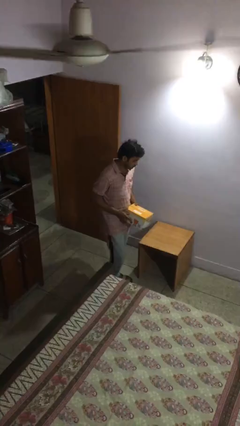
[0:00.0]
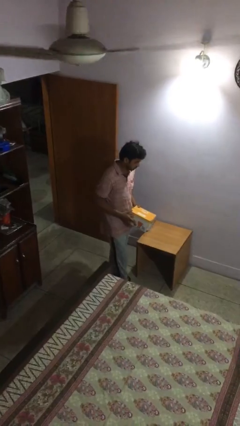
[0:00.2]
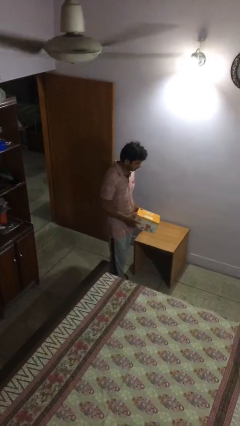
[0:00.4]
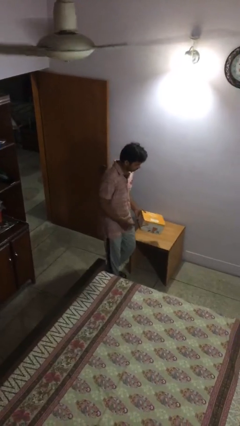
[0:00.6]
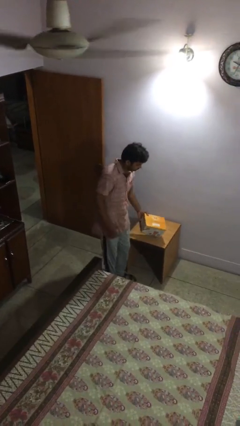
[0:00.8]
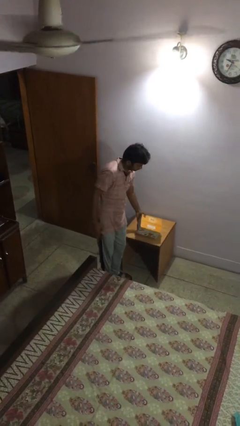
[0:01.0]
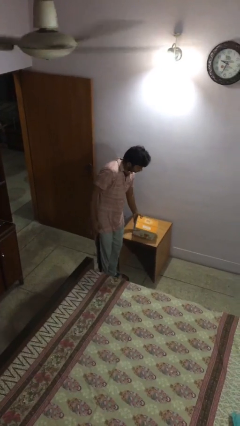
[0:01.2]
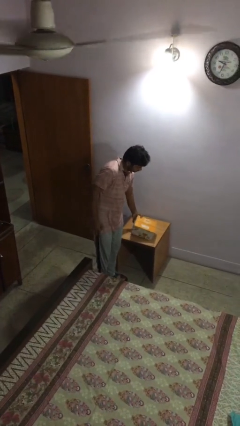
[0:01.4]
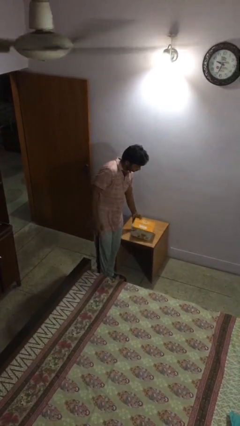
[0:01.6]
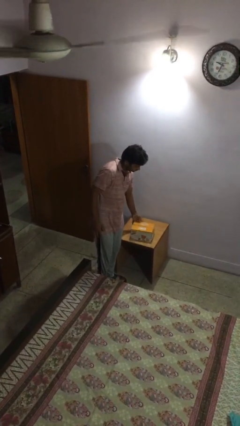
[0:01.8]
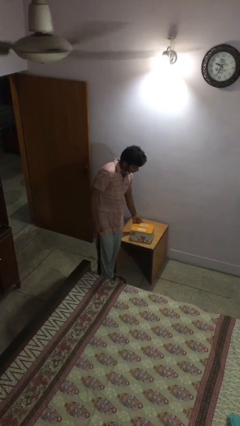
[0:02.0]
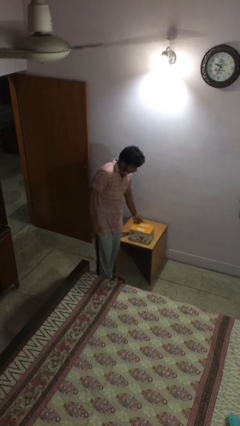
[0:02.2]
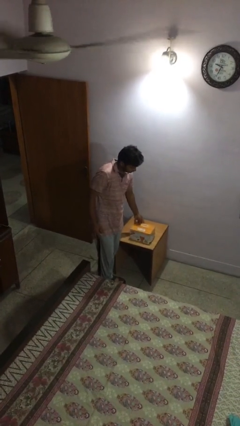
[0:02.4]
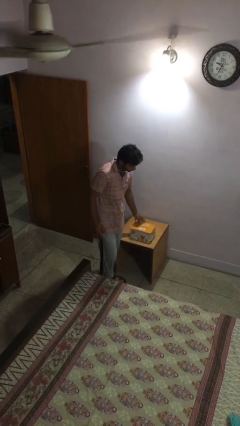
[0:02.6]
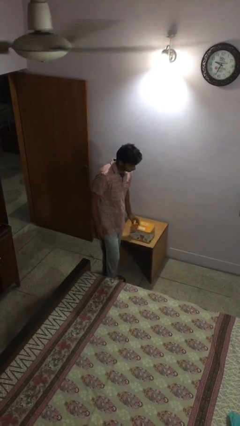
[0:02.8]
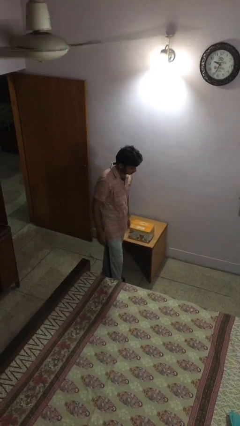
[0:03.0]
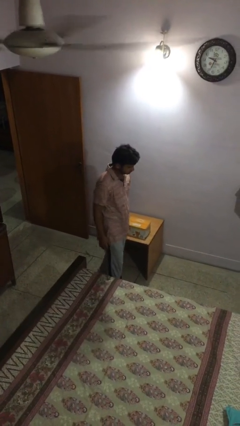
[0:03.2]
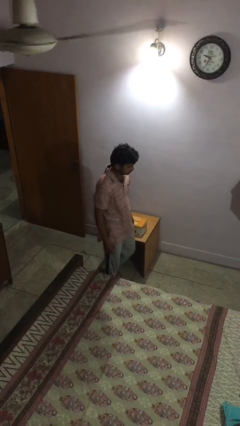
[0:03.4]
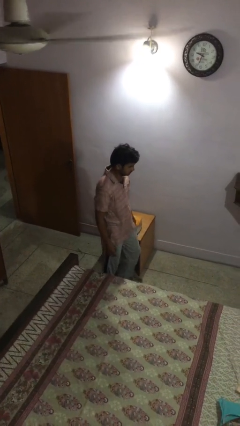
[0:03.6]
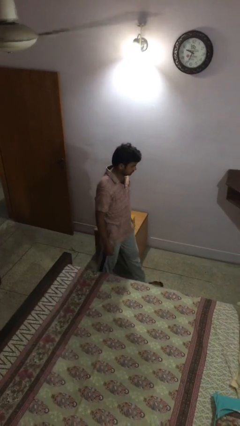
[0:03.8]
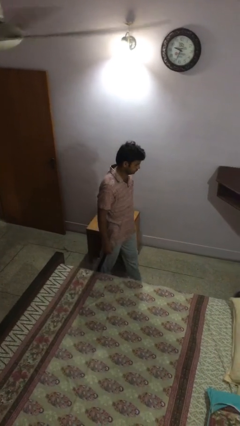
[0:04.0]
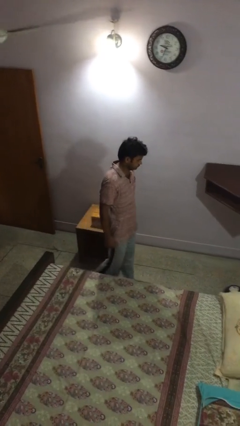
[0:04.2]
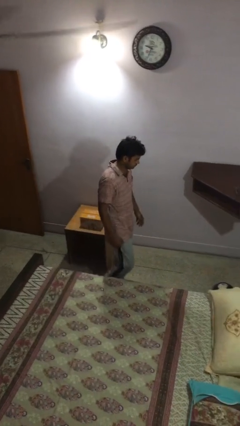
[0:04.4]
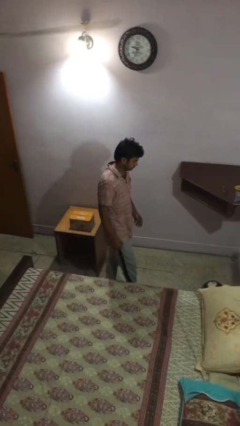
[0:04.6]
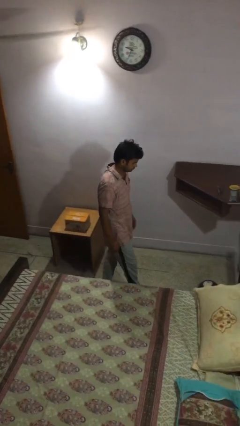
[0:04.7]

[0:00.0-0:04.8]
person puts down object on table

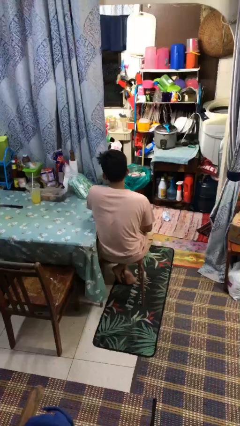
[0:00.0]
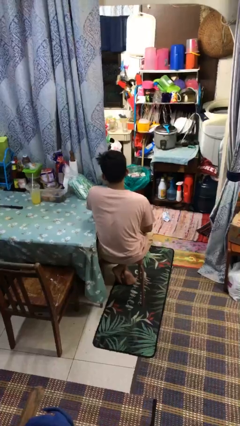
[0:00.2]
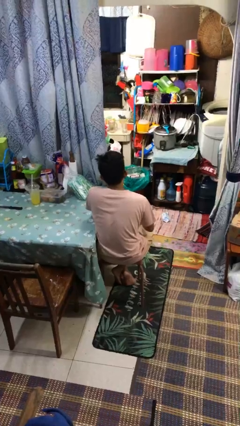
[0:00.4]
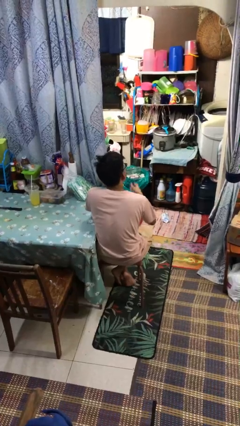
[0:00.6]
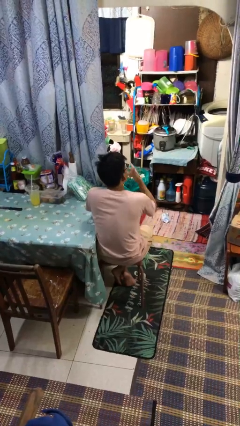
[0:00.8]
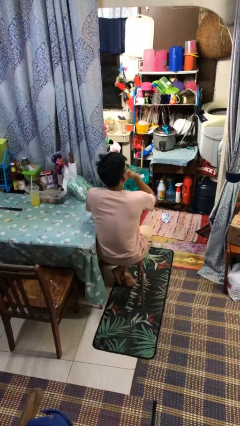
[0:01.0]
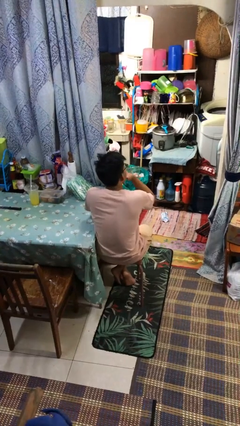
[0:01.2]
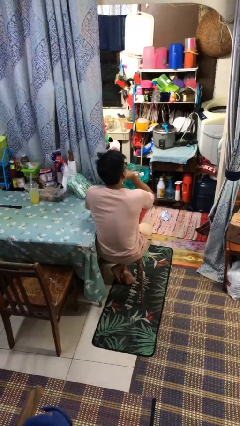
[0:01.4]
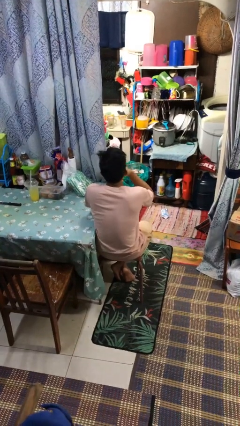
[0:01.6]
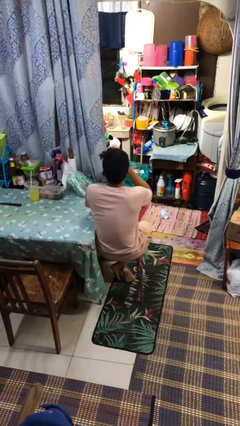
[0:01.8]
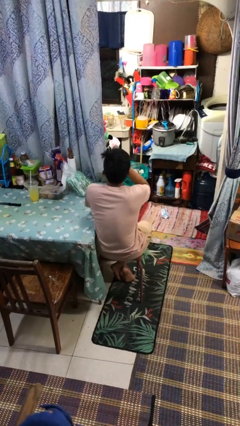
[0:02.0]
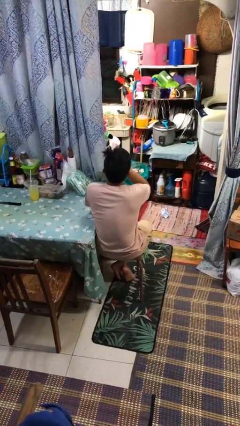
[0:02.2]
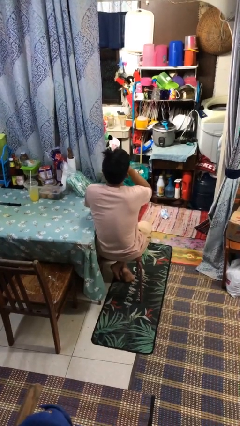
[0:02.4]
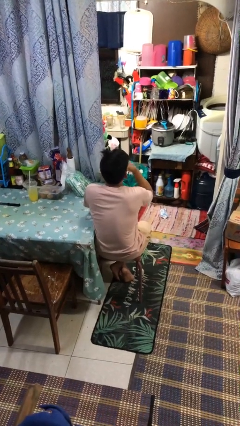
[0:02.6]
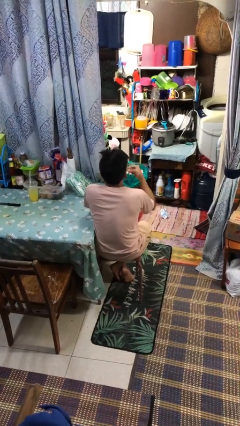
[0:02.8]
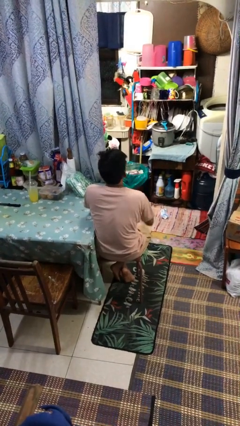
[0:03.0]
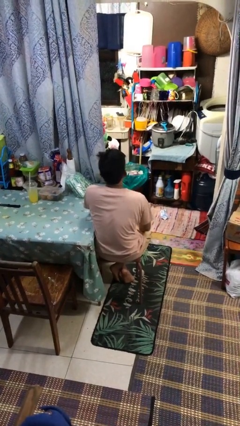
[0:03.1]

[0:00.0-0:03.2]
person strokes chin

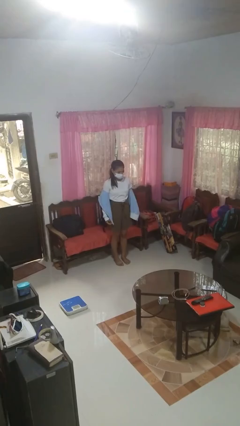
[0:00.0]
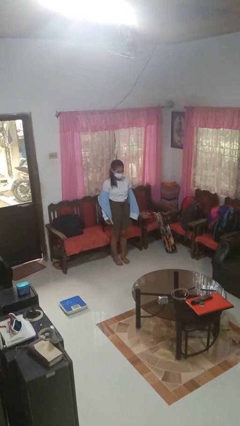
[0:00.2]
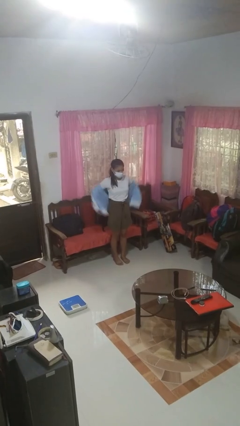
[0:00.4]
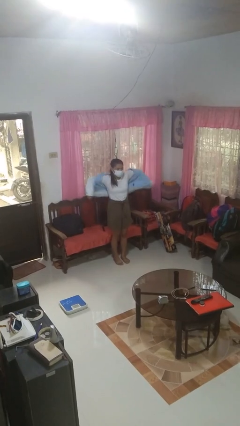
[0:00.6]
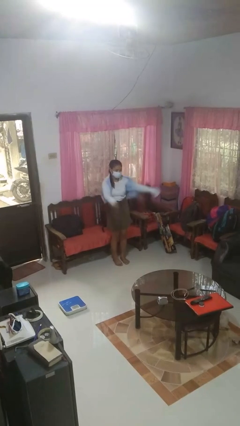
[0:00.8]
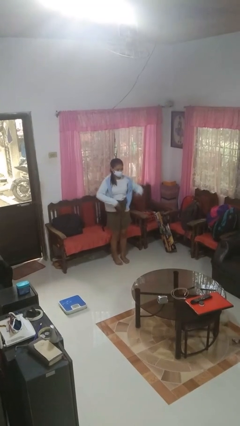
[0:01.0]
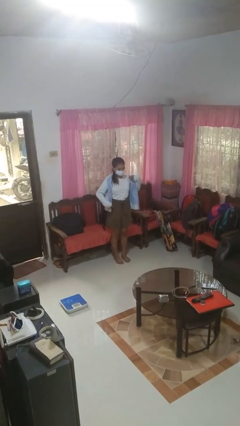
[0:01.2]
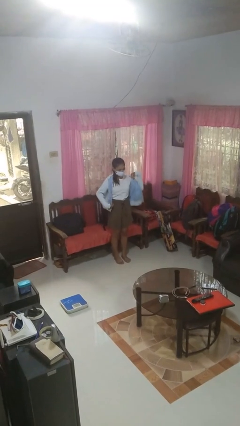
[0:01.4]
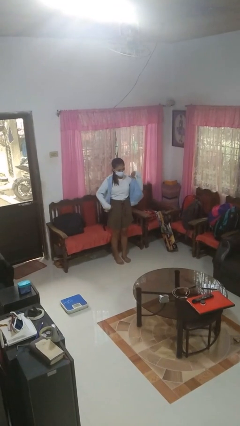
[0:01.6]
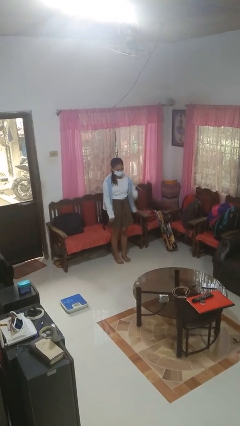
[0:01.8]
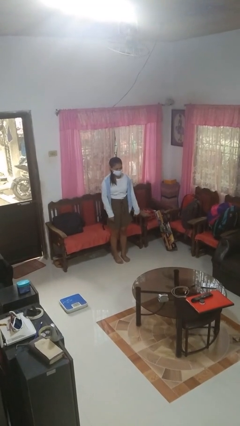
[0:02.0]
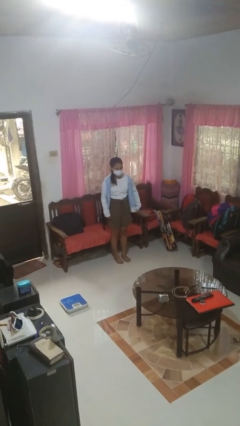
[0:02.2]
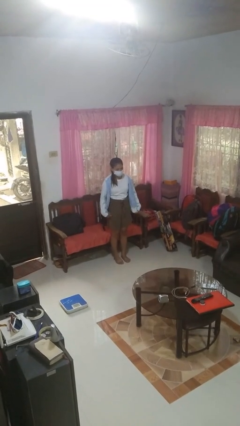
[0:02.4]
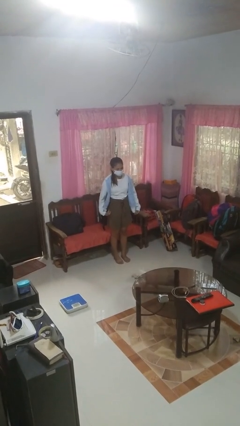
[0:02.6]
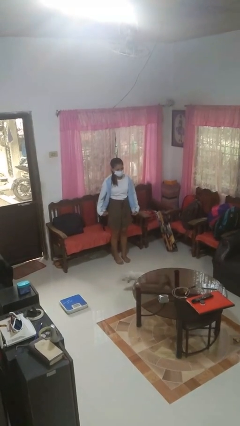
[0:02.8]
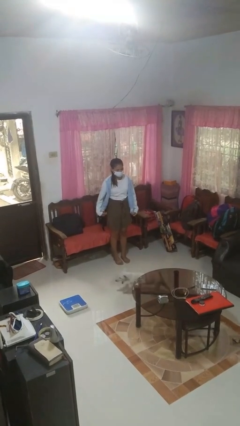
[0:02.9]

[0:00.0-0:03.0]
person puts on jacket

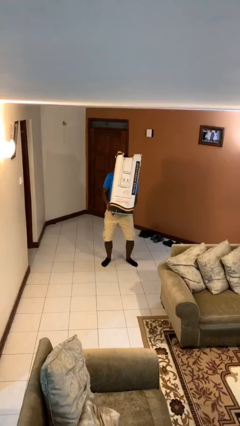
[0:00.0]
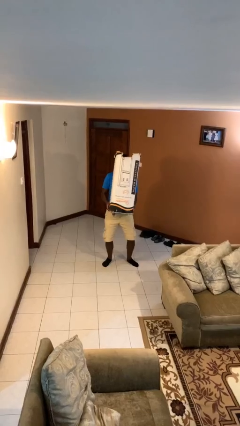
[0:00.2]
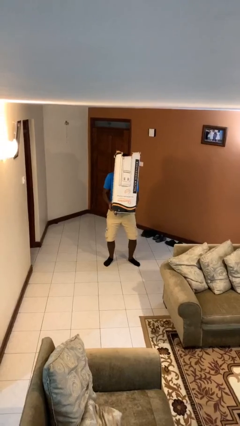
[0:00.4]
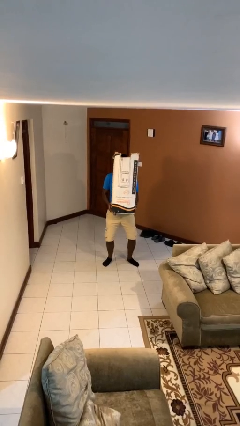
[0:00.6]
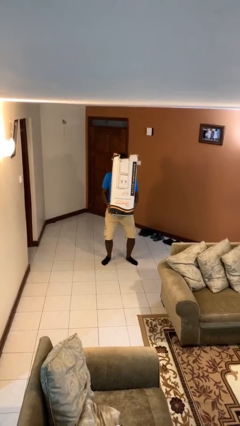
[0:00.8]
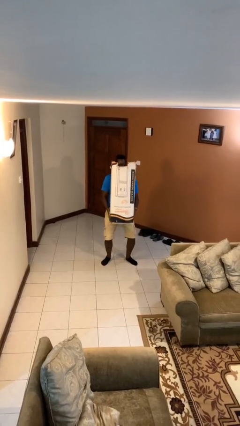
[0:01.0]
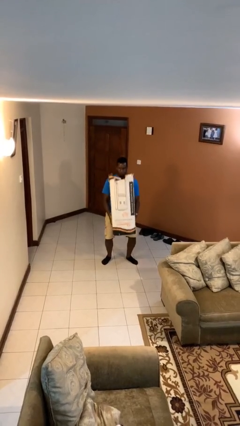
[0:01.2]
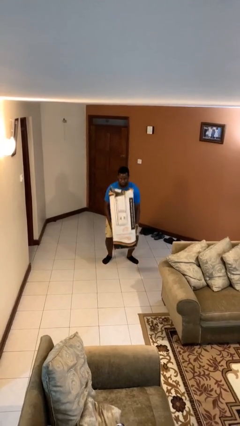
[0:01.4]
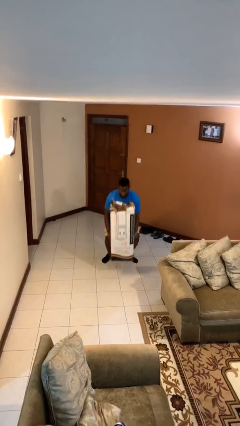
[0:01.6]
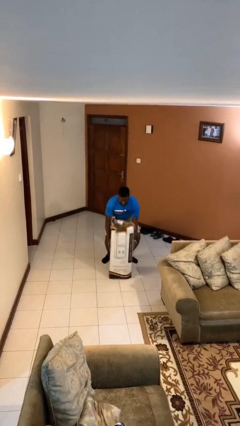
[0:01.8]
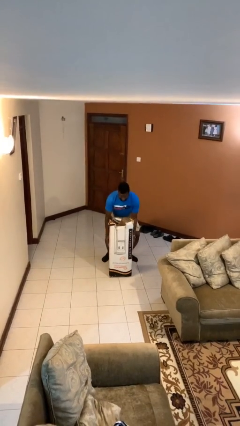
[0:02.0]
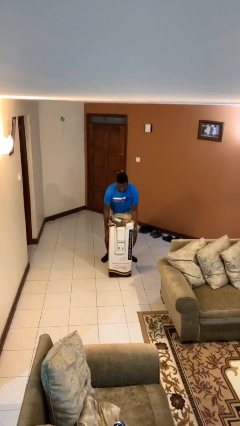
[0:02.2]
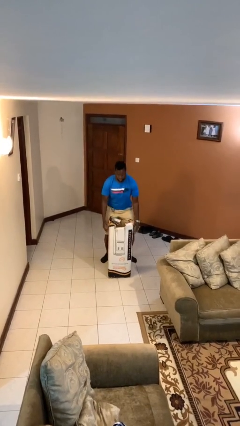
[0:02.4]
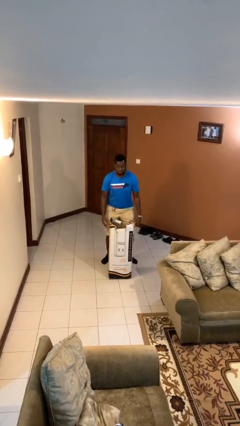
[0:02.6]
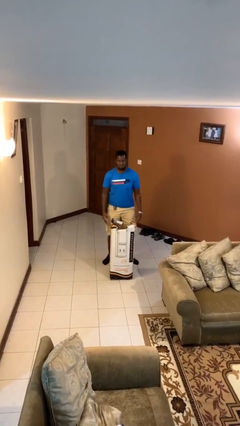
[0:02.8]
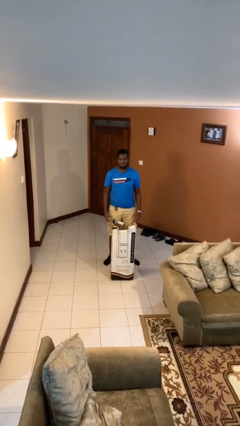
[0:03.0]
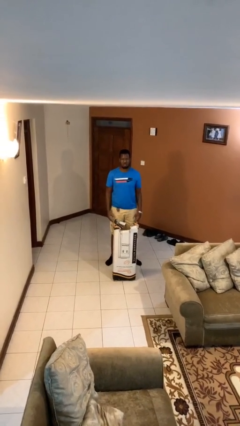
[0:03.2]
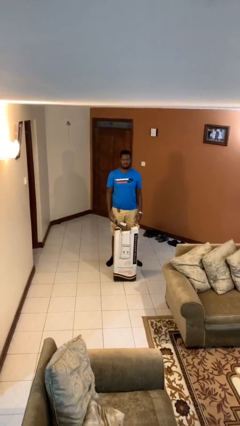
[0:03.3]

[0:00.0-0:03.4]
person puts down object on floor

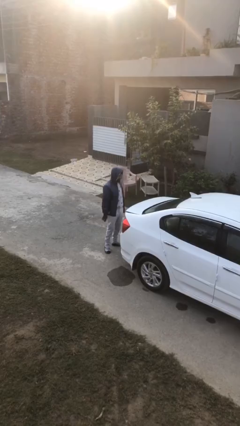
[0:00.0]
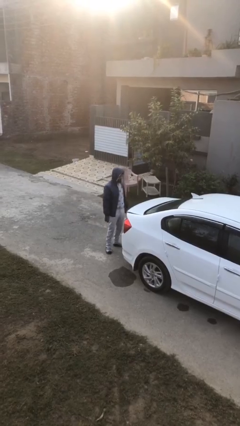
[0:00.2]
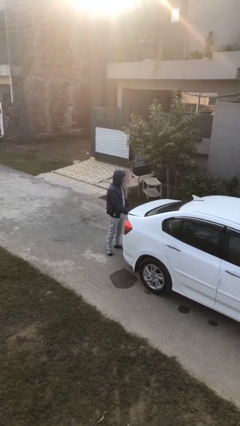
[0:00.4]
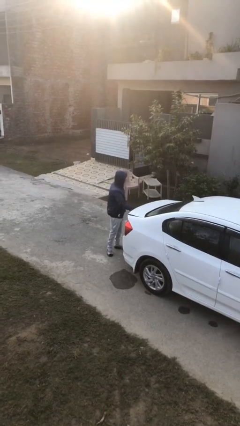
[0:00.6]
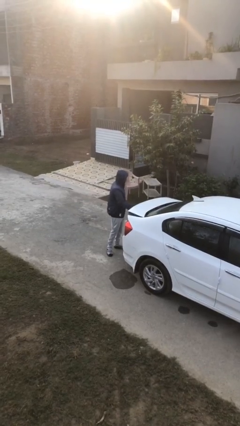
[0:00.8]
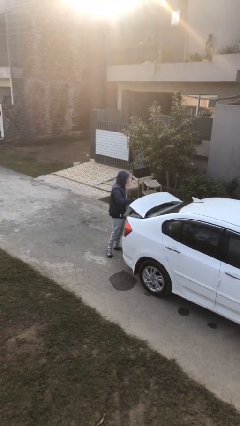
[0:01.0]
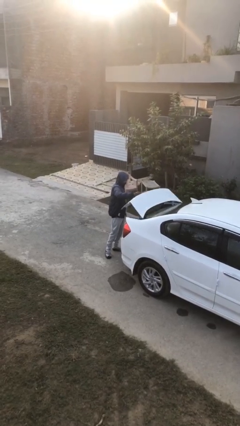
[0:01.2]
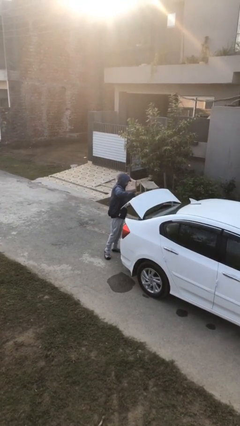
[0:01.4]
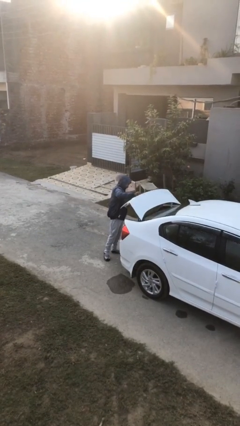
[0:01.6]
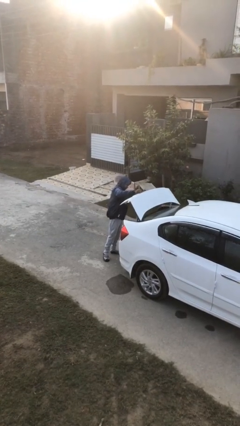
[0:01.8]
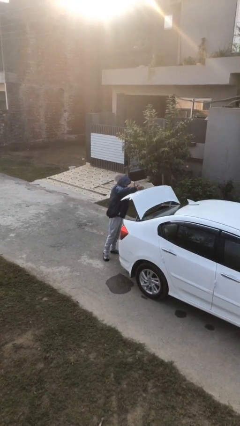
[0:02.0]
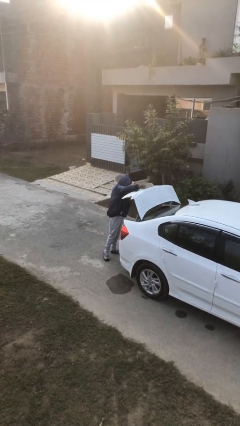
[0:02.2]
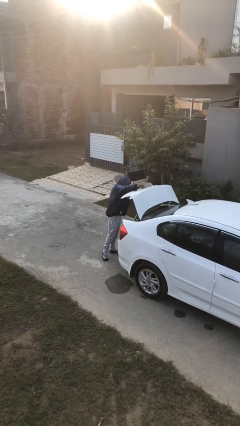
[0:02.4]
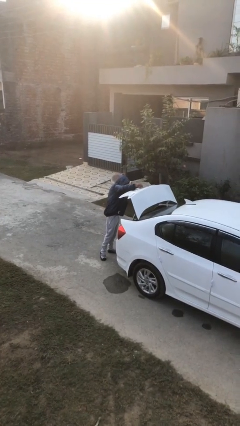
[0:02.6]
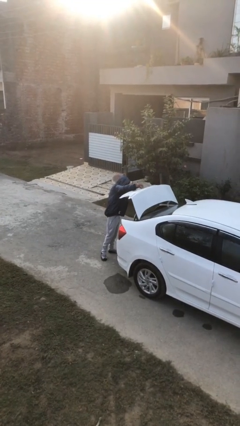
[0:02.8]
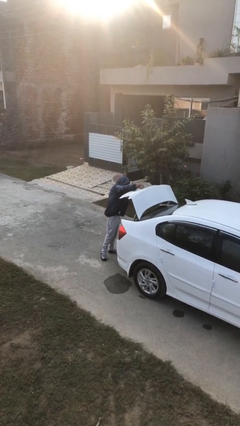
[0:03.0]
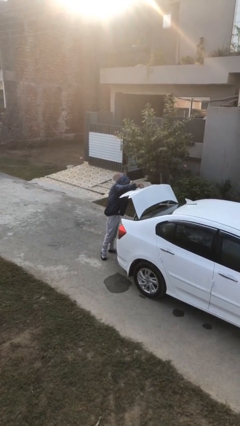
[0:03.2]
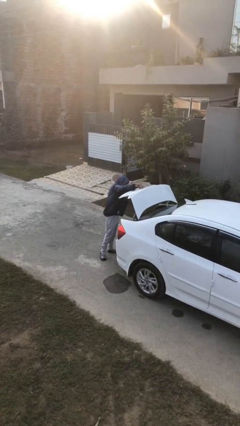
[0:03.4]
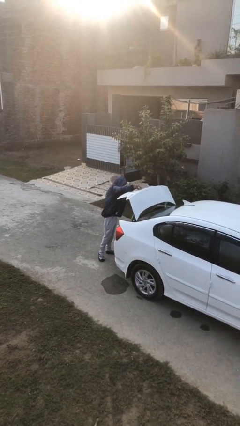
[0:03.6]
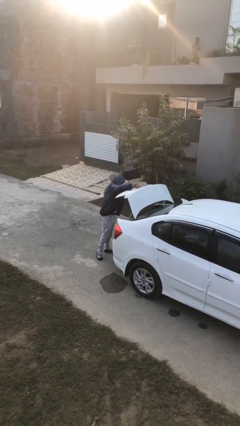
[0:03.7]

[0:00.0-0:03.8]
person opens car trunk
